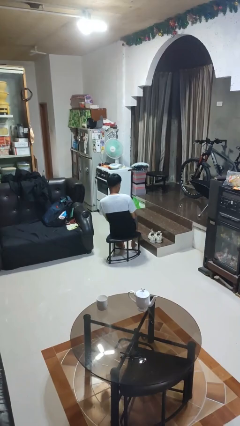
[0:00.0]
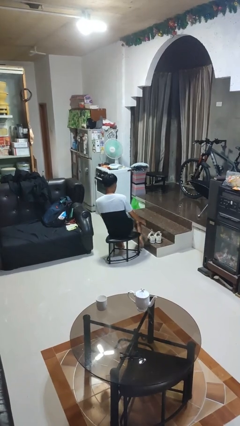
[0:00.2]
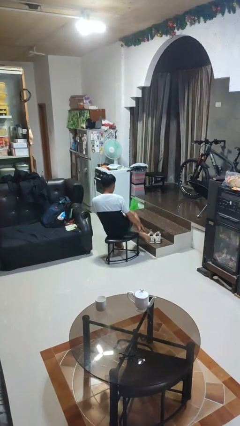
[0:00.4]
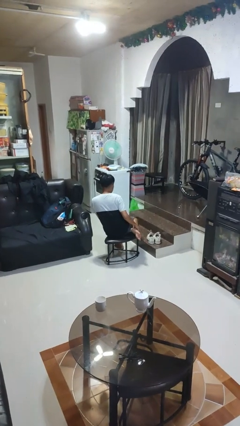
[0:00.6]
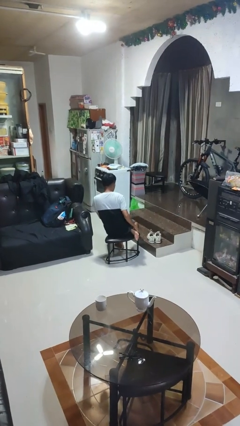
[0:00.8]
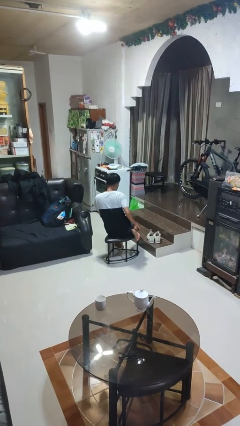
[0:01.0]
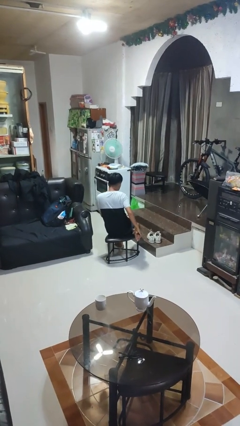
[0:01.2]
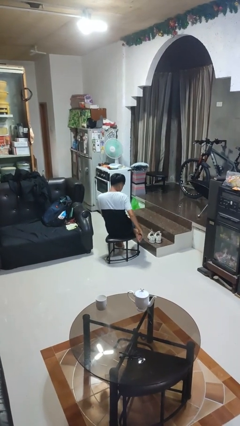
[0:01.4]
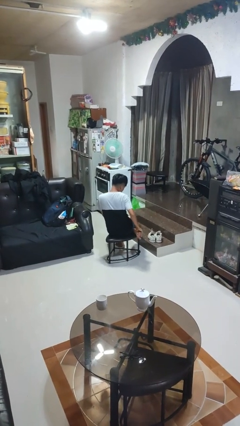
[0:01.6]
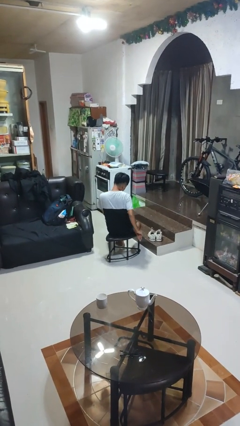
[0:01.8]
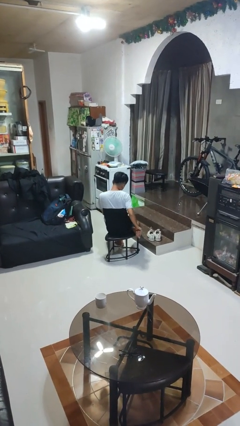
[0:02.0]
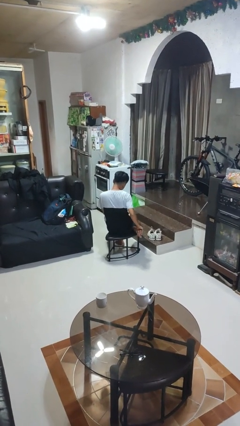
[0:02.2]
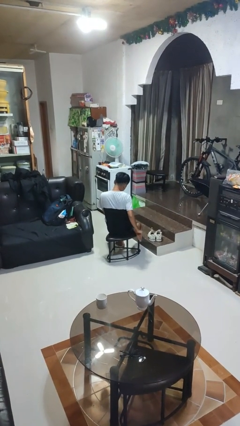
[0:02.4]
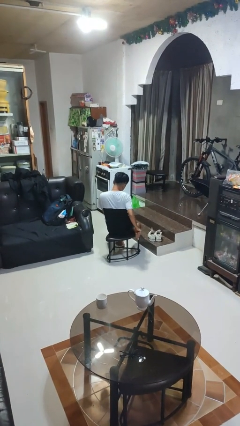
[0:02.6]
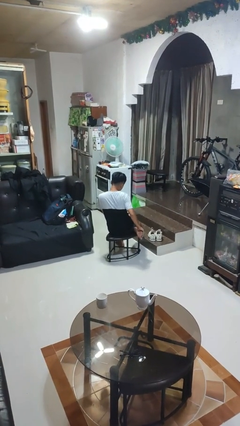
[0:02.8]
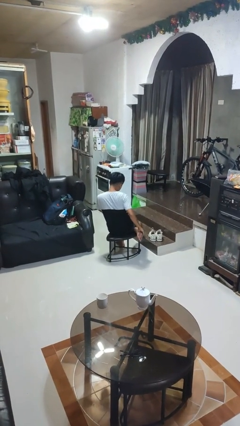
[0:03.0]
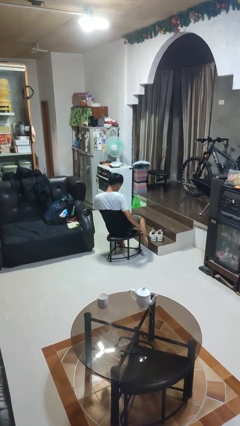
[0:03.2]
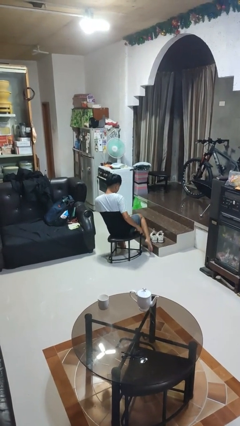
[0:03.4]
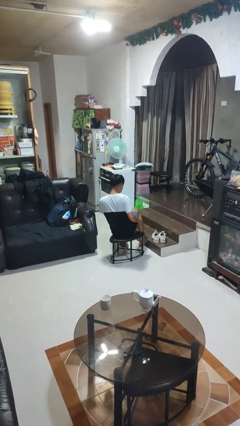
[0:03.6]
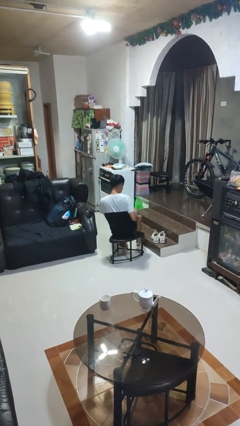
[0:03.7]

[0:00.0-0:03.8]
person rubs foot

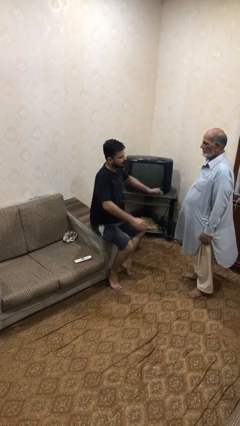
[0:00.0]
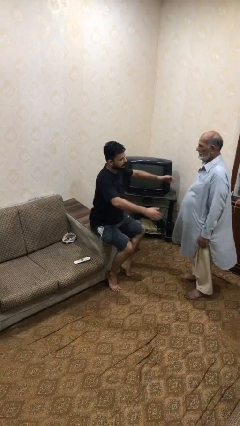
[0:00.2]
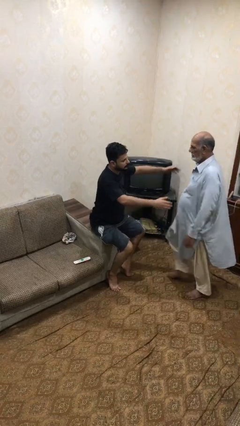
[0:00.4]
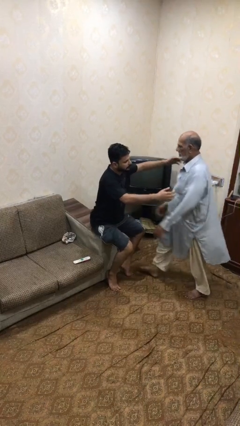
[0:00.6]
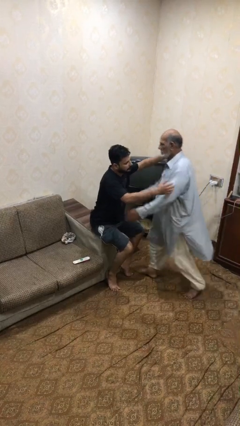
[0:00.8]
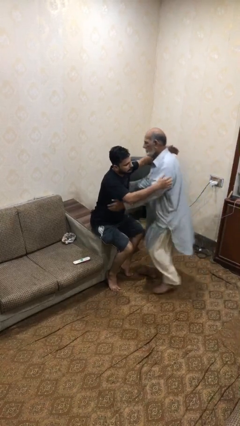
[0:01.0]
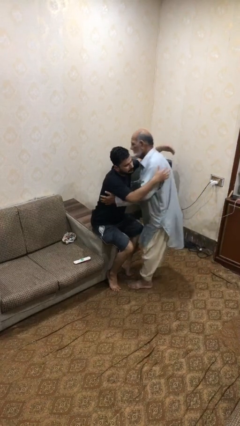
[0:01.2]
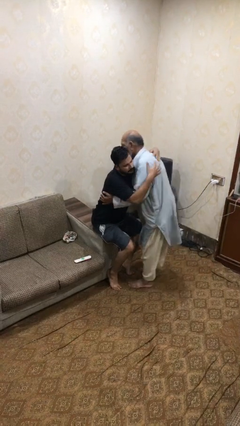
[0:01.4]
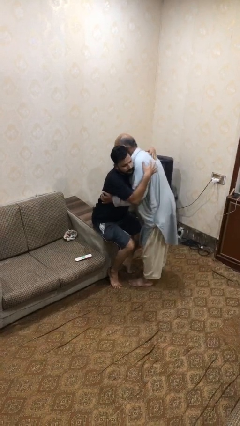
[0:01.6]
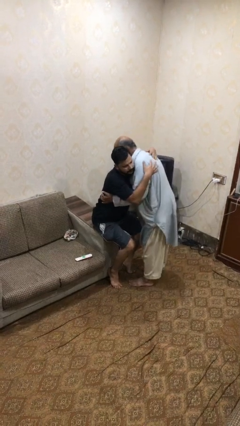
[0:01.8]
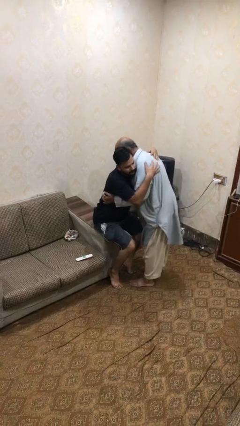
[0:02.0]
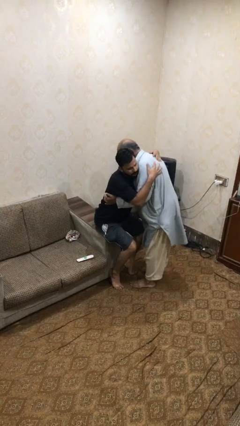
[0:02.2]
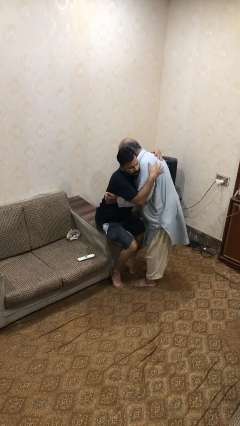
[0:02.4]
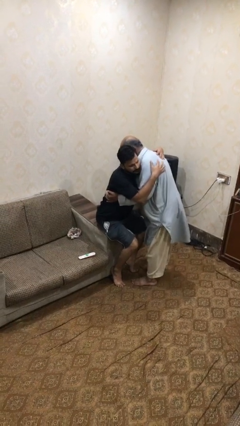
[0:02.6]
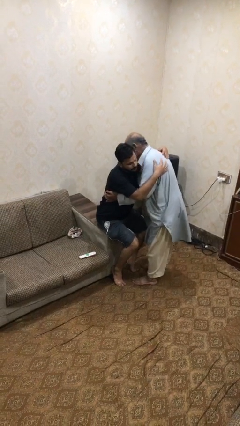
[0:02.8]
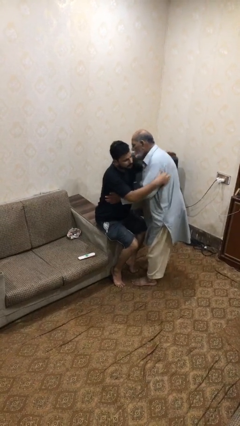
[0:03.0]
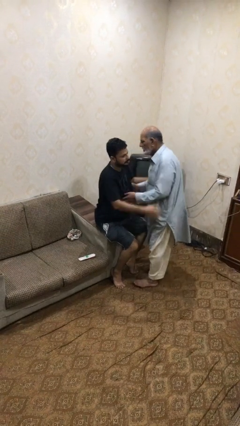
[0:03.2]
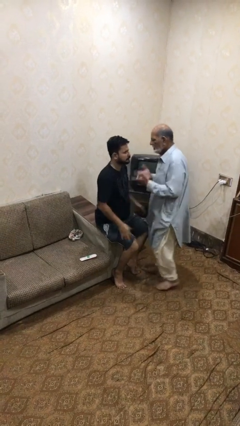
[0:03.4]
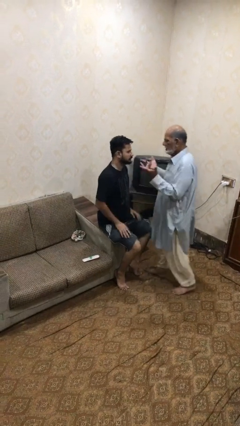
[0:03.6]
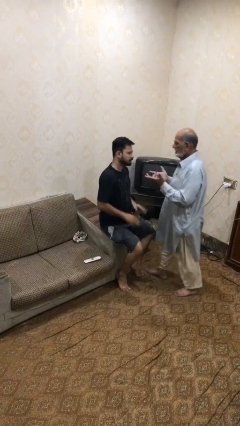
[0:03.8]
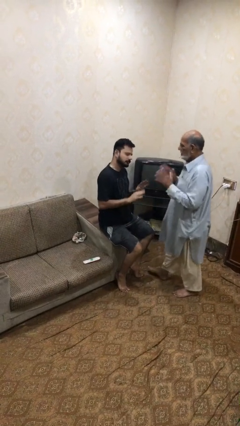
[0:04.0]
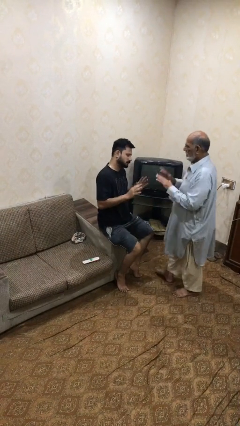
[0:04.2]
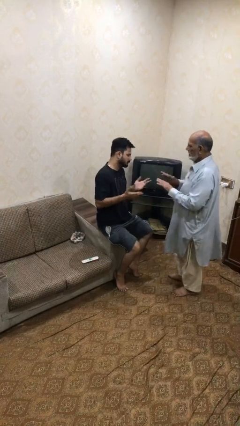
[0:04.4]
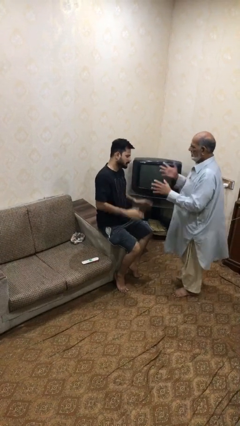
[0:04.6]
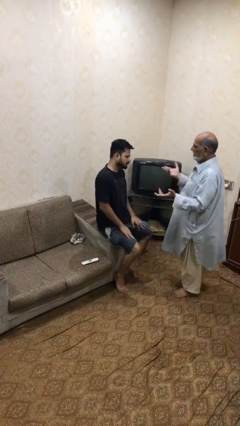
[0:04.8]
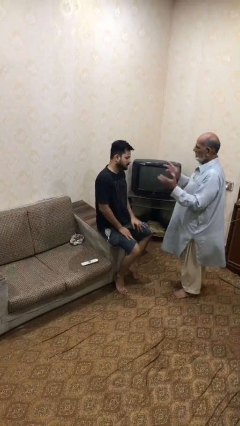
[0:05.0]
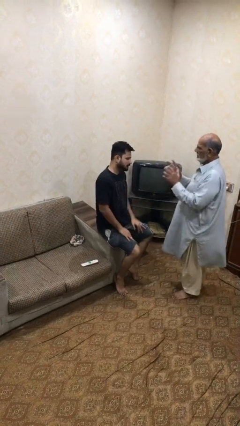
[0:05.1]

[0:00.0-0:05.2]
person embraces person

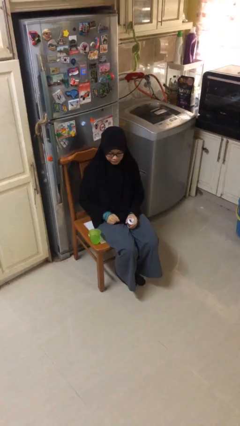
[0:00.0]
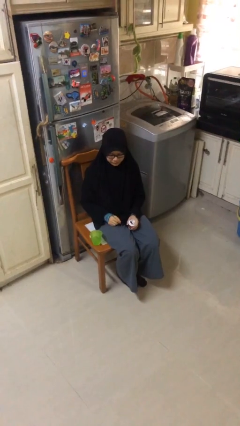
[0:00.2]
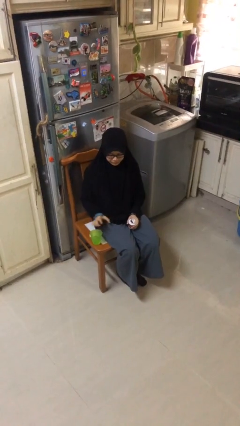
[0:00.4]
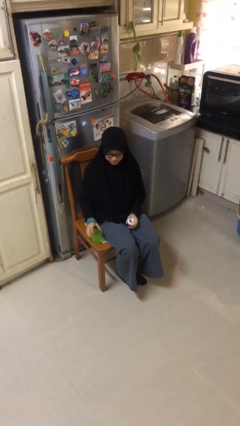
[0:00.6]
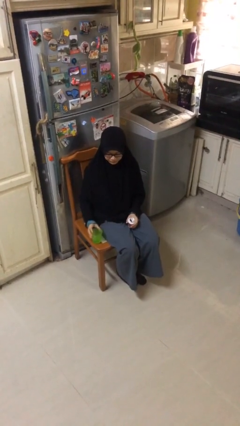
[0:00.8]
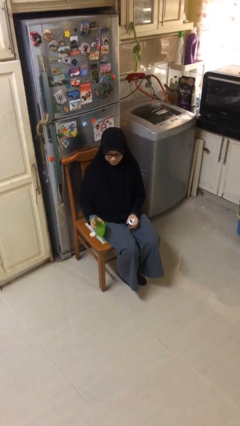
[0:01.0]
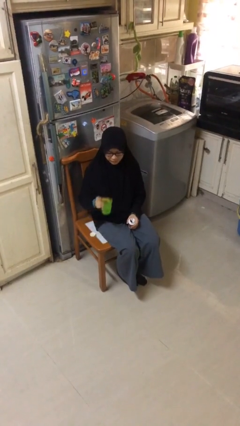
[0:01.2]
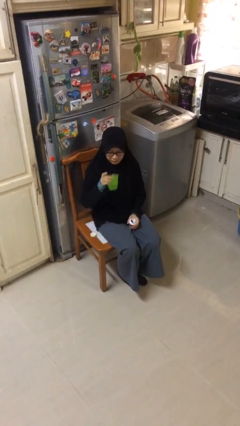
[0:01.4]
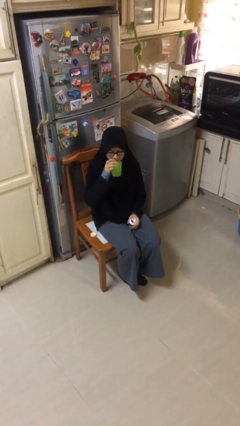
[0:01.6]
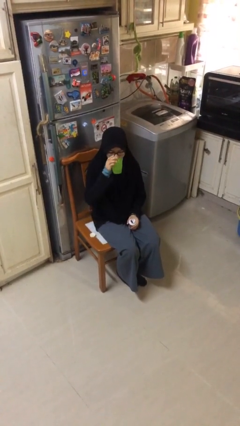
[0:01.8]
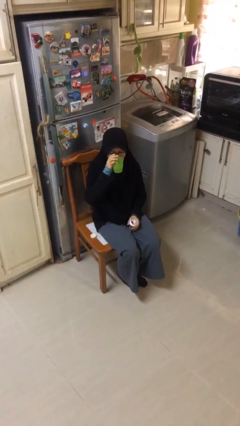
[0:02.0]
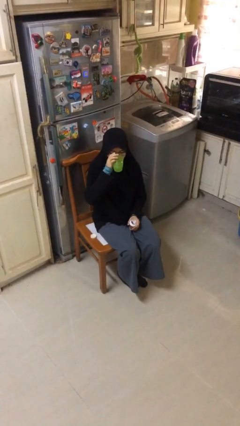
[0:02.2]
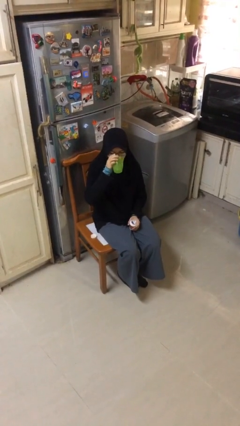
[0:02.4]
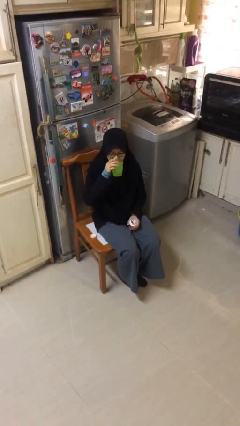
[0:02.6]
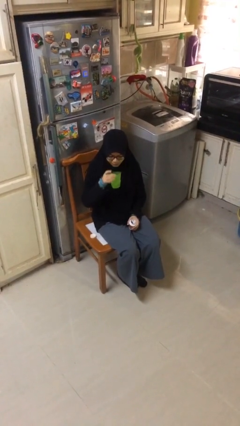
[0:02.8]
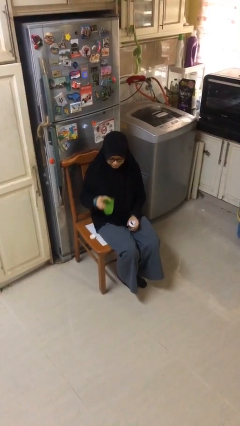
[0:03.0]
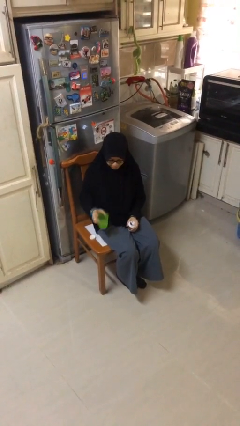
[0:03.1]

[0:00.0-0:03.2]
person drinks from cup

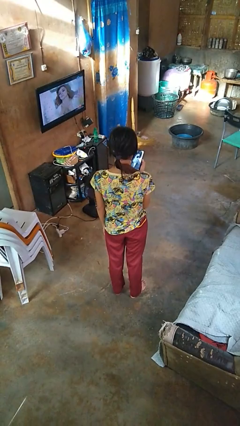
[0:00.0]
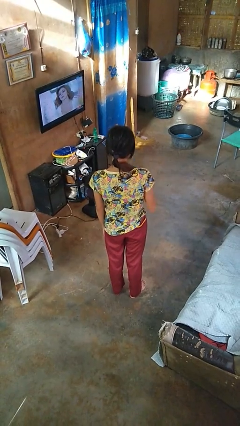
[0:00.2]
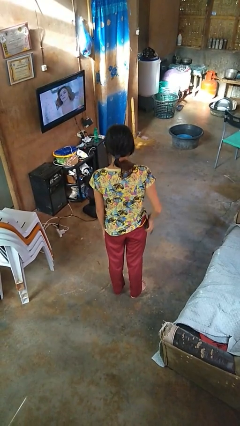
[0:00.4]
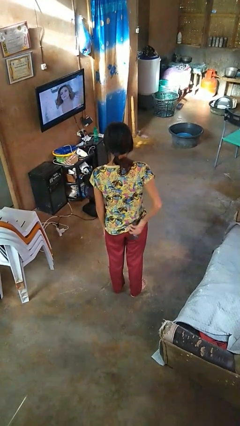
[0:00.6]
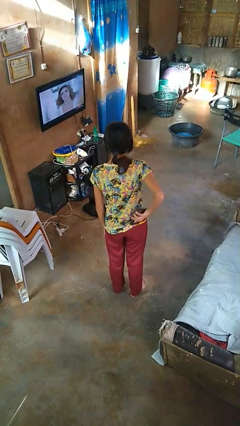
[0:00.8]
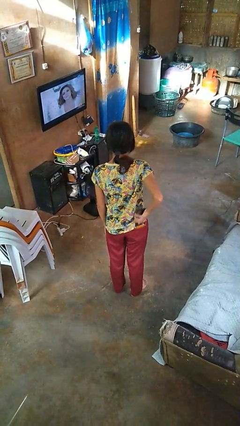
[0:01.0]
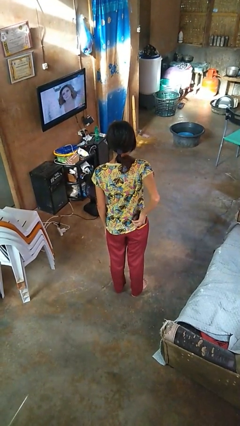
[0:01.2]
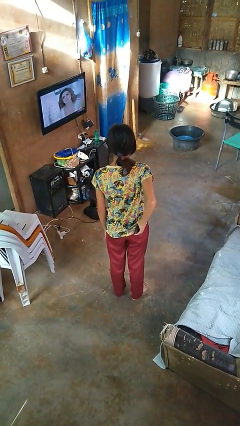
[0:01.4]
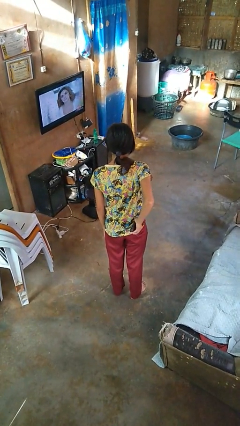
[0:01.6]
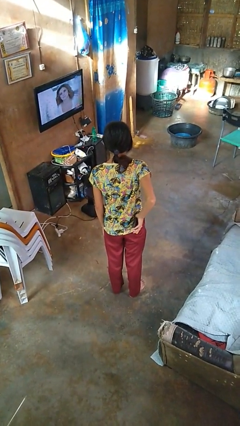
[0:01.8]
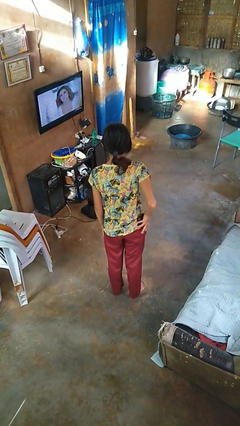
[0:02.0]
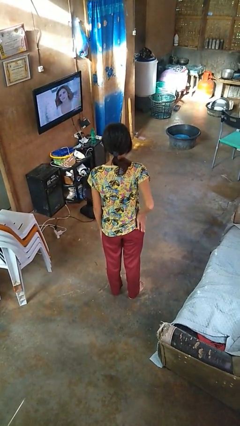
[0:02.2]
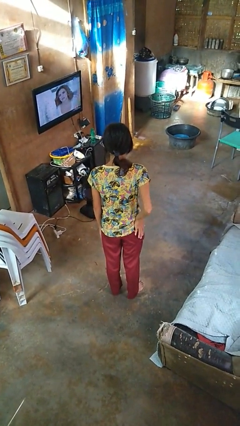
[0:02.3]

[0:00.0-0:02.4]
person puts phone into pocket

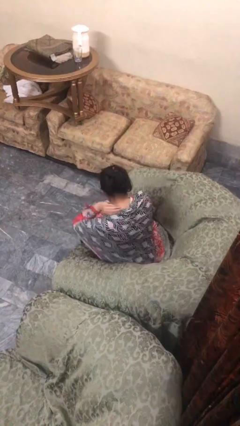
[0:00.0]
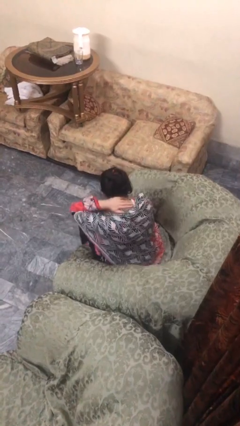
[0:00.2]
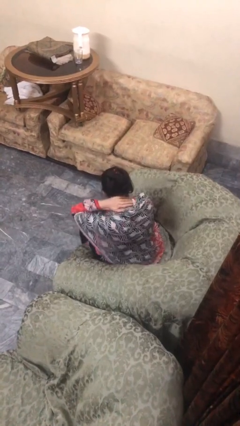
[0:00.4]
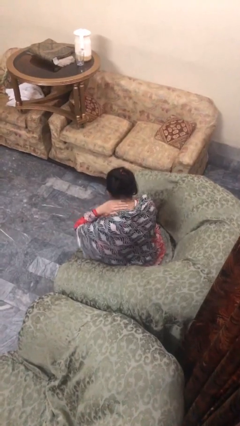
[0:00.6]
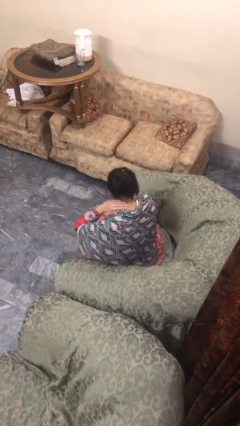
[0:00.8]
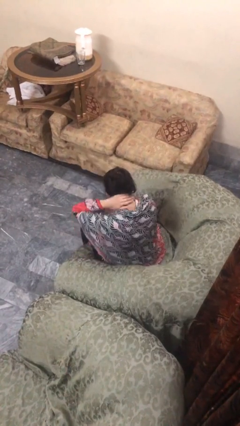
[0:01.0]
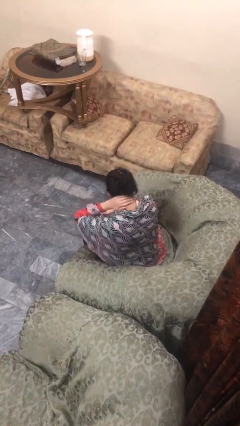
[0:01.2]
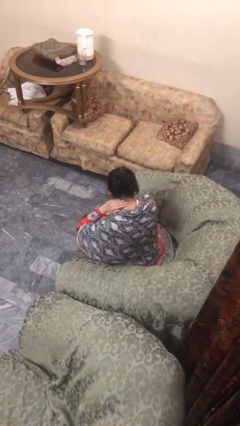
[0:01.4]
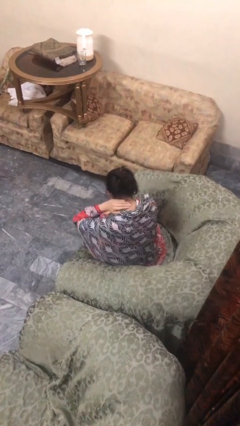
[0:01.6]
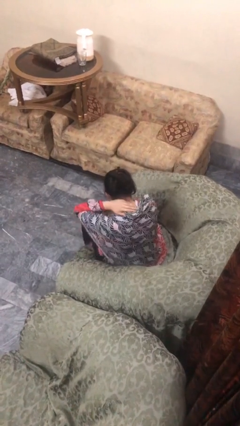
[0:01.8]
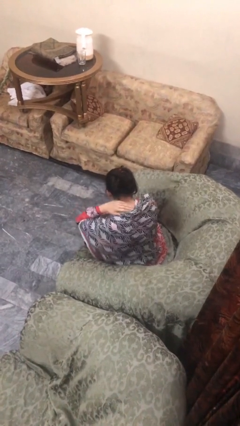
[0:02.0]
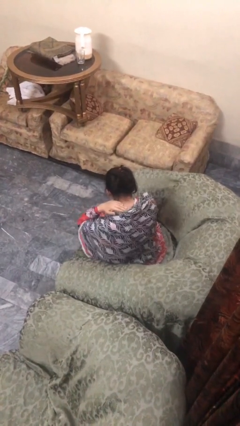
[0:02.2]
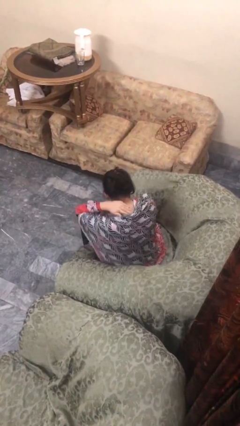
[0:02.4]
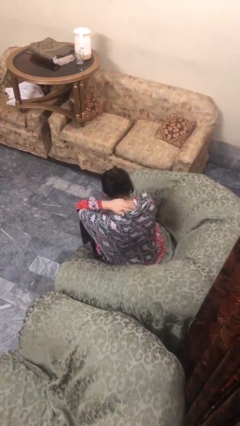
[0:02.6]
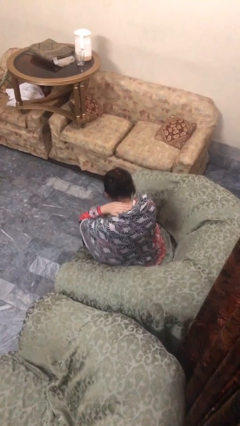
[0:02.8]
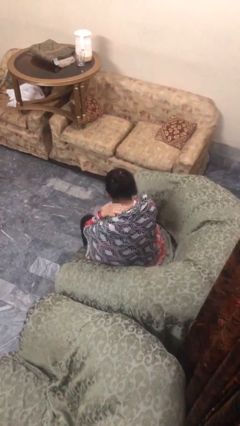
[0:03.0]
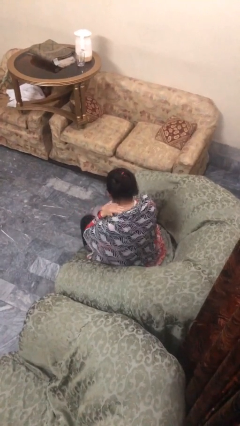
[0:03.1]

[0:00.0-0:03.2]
person rubs neck
